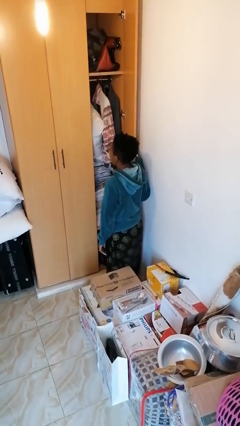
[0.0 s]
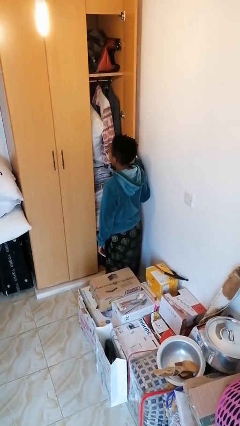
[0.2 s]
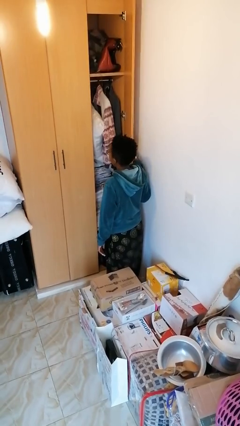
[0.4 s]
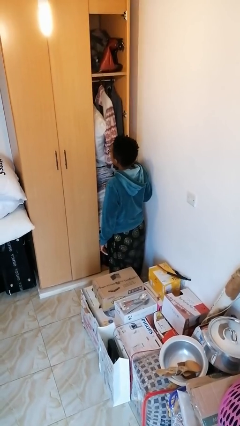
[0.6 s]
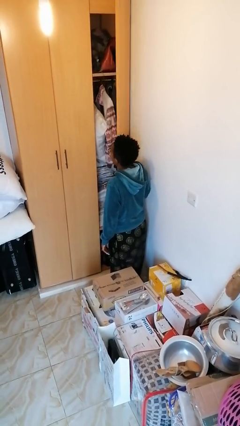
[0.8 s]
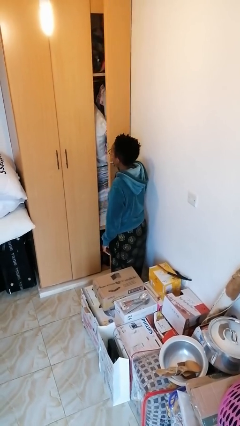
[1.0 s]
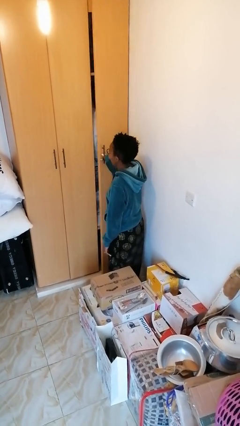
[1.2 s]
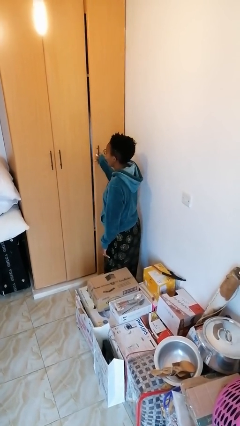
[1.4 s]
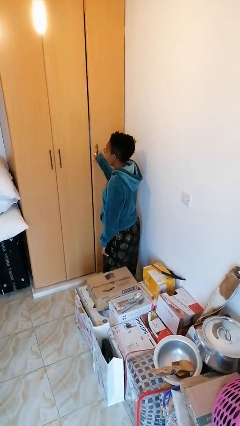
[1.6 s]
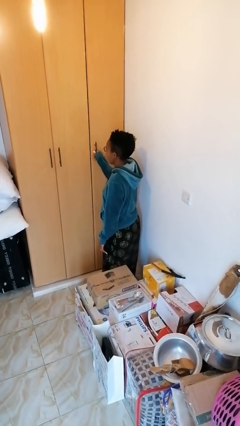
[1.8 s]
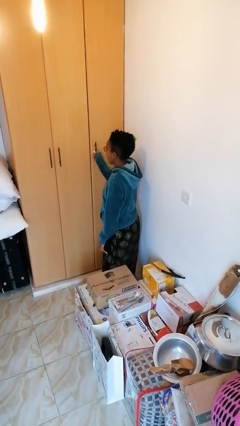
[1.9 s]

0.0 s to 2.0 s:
person closes closet door

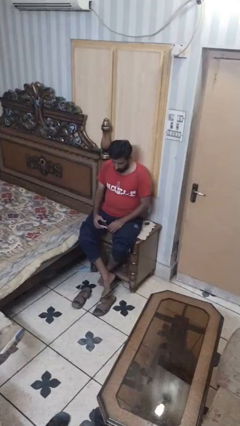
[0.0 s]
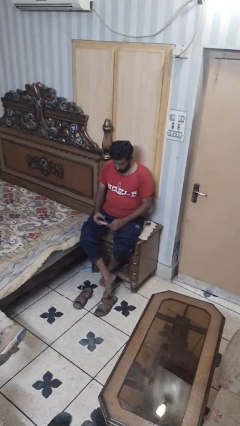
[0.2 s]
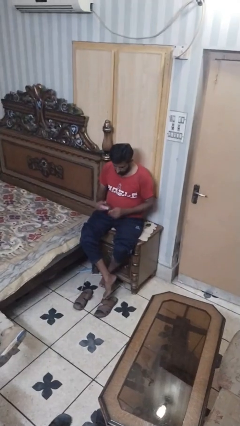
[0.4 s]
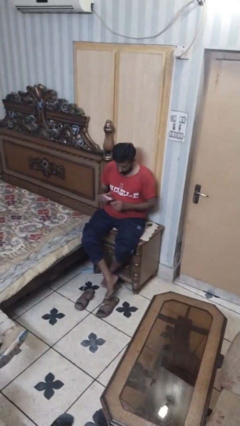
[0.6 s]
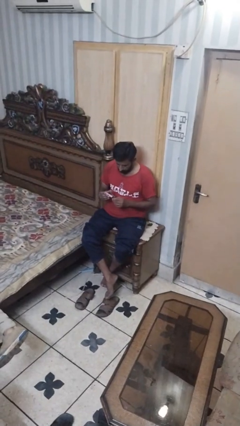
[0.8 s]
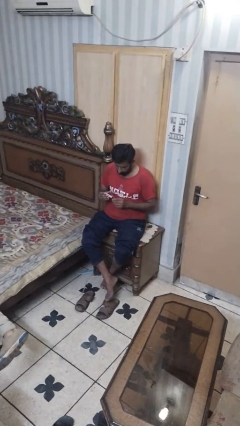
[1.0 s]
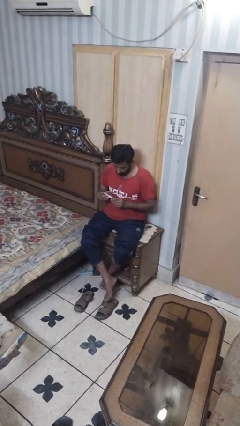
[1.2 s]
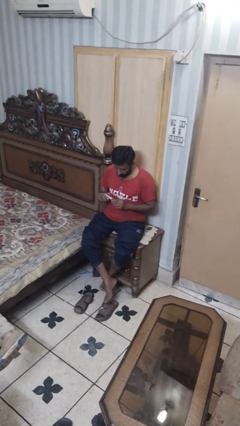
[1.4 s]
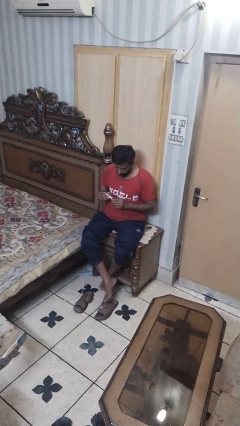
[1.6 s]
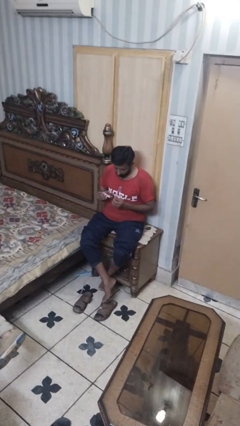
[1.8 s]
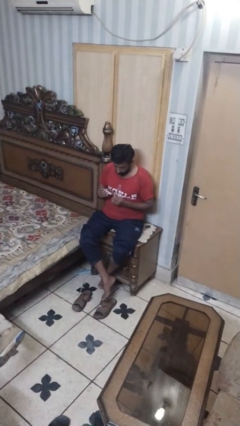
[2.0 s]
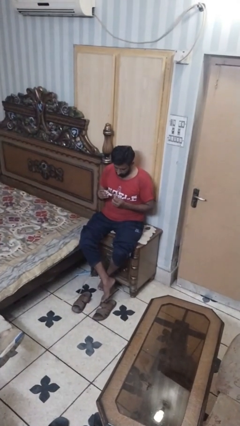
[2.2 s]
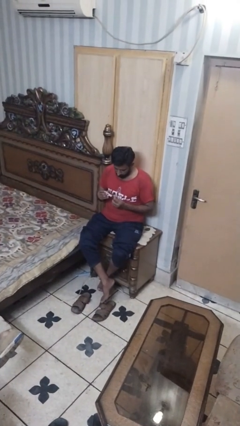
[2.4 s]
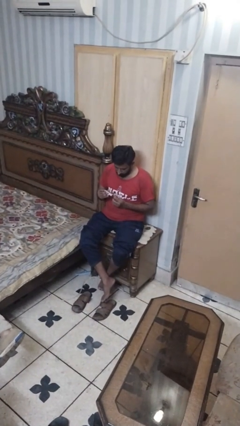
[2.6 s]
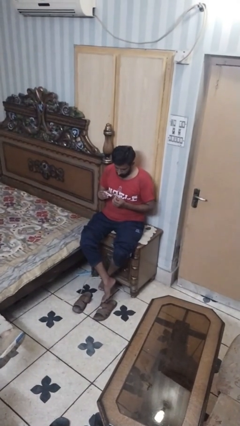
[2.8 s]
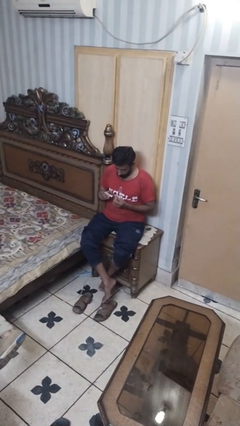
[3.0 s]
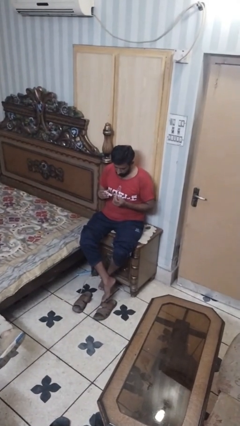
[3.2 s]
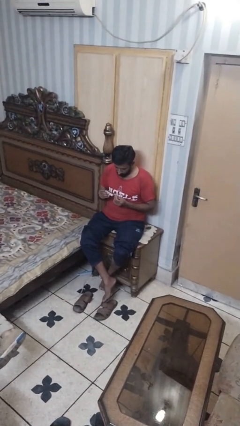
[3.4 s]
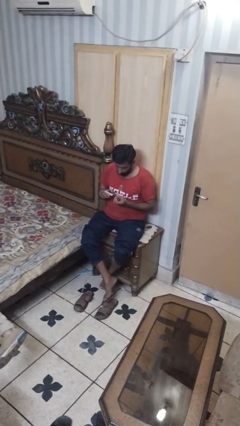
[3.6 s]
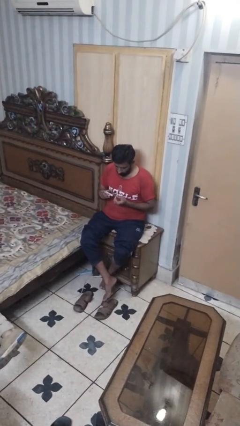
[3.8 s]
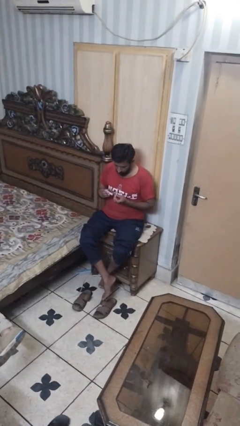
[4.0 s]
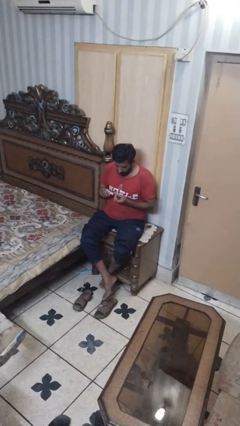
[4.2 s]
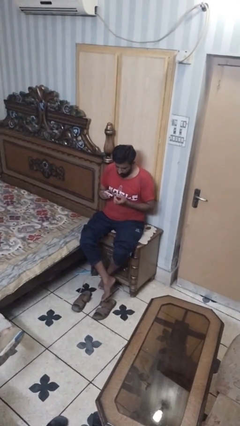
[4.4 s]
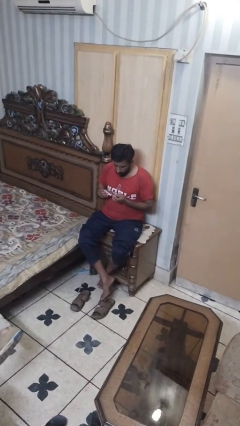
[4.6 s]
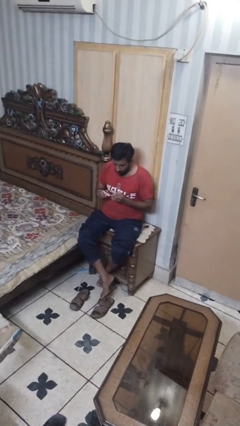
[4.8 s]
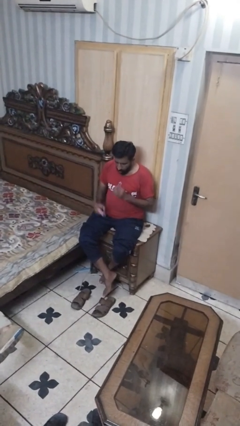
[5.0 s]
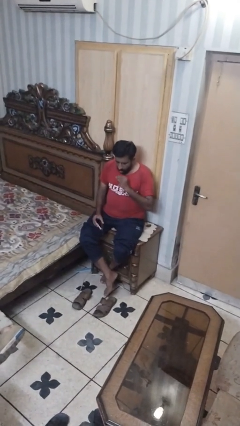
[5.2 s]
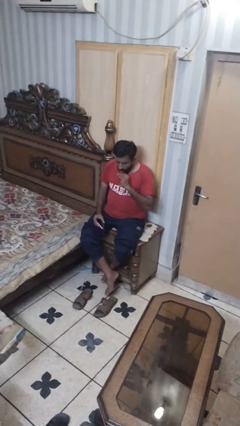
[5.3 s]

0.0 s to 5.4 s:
person clips fingernails

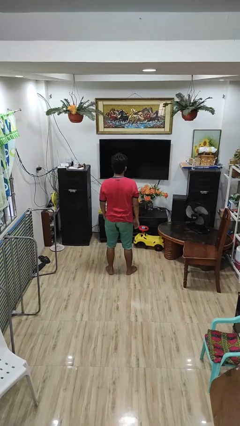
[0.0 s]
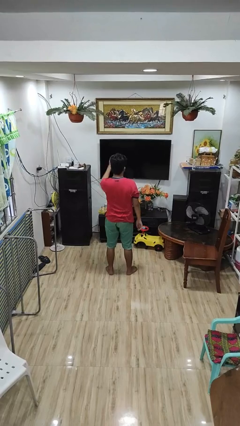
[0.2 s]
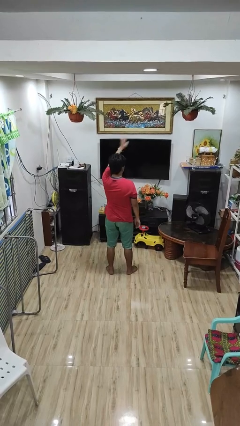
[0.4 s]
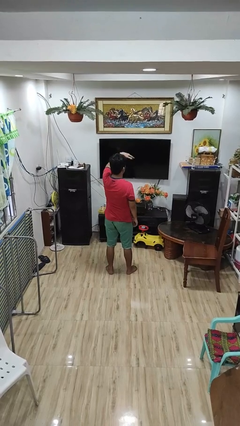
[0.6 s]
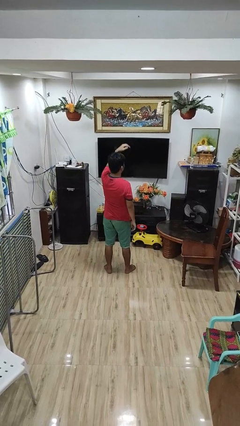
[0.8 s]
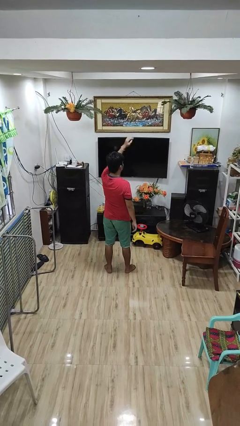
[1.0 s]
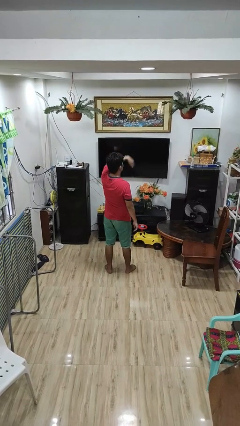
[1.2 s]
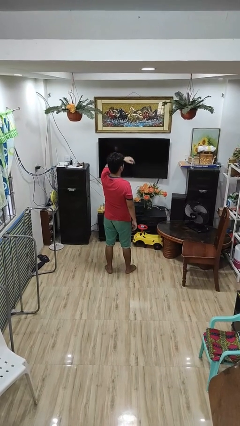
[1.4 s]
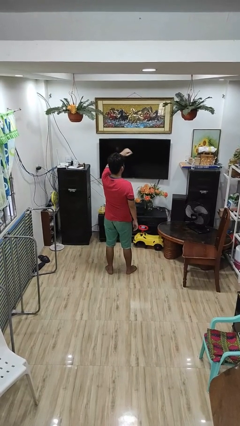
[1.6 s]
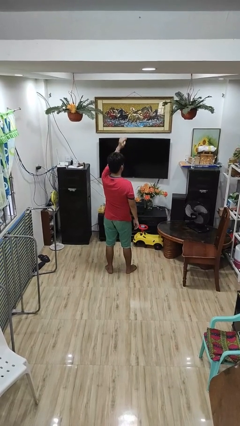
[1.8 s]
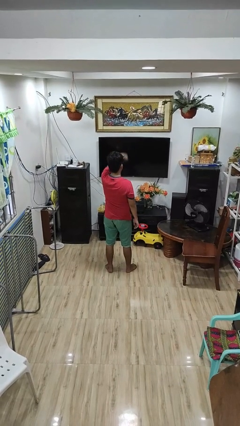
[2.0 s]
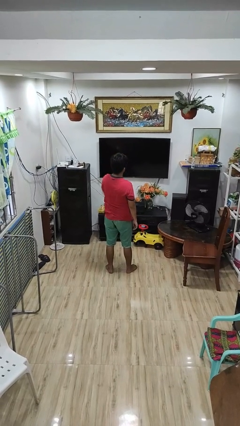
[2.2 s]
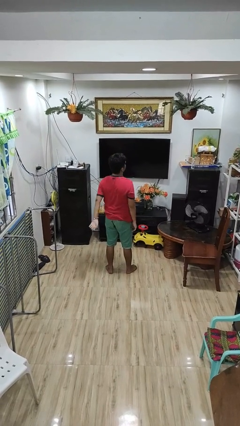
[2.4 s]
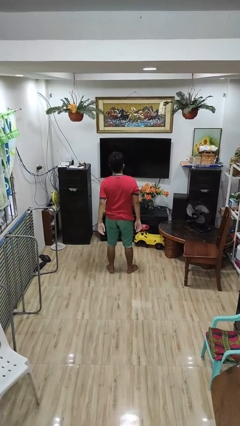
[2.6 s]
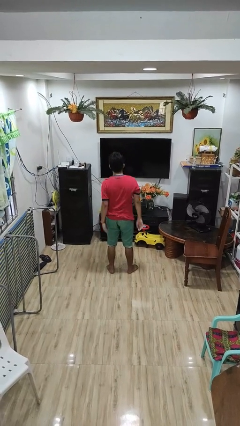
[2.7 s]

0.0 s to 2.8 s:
person gestures come here

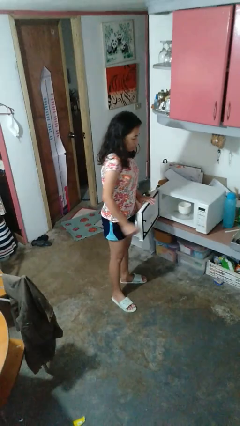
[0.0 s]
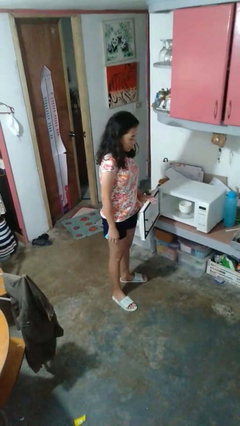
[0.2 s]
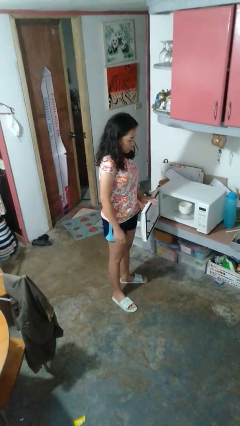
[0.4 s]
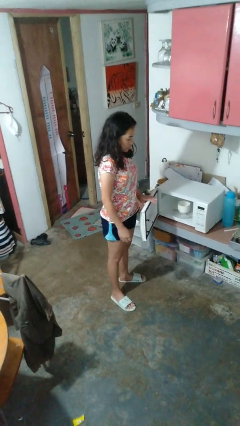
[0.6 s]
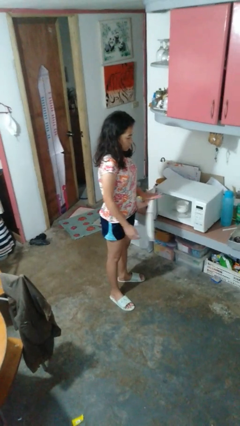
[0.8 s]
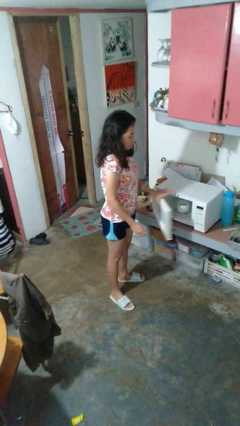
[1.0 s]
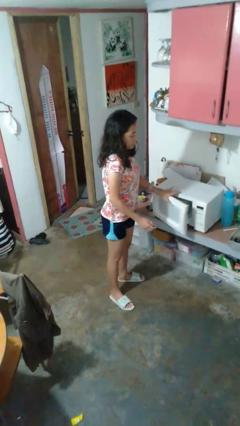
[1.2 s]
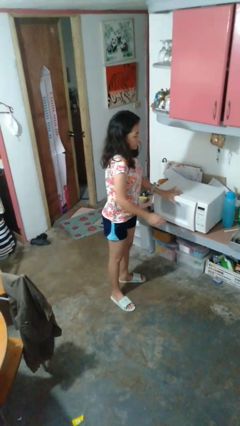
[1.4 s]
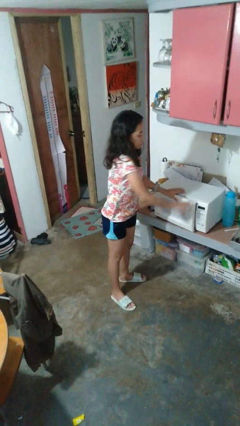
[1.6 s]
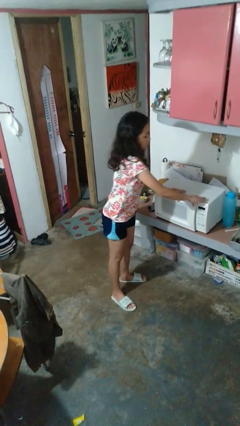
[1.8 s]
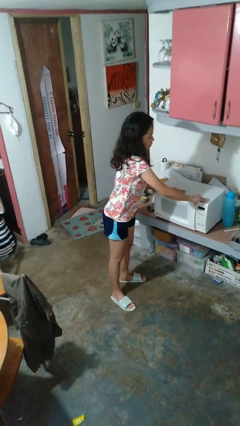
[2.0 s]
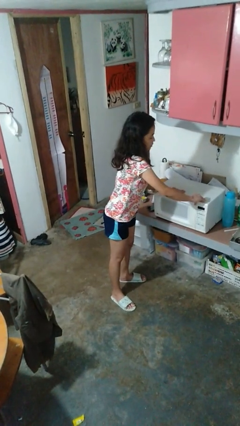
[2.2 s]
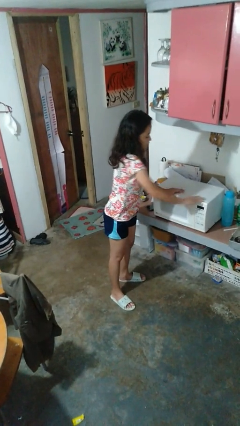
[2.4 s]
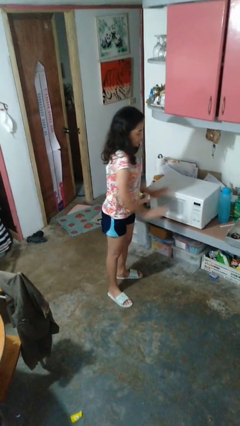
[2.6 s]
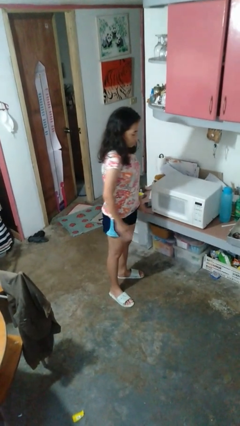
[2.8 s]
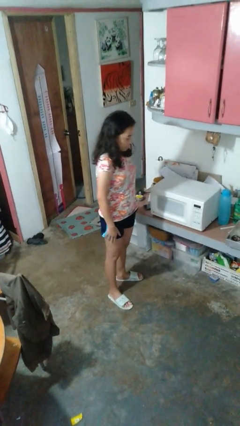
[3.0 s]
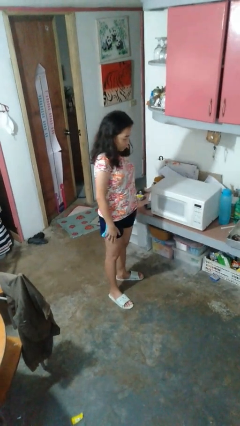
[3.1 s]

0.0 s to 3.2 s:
person closes microwave

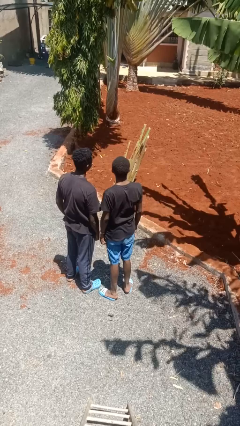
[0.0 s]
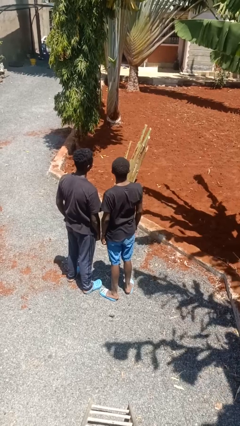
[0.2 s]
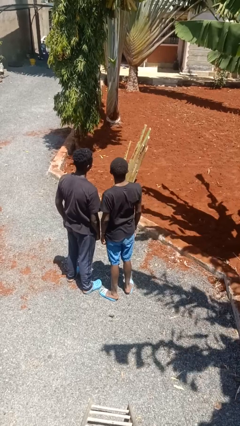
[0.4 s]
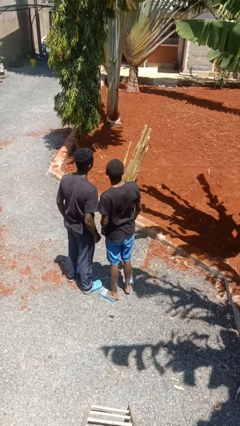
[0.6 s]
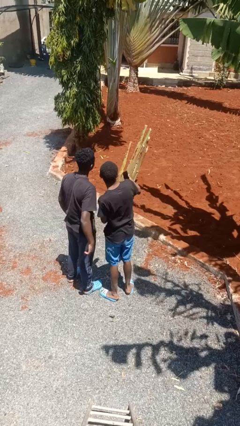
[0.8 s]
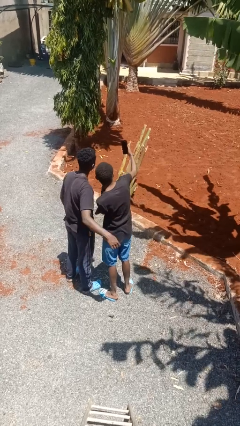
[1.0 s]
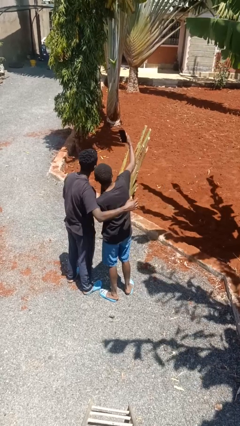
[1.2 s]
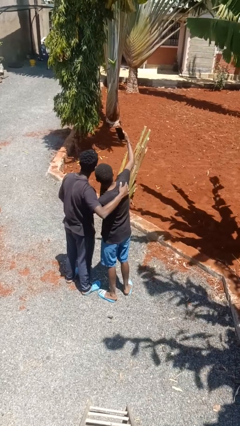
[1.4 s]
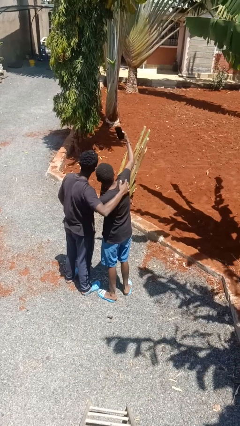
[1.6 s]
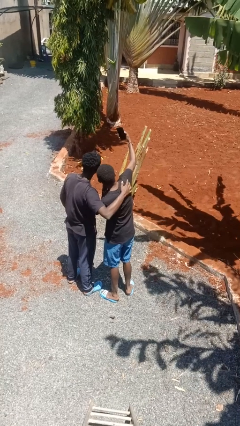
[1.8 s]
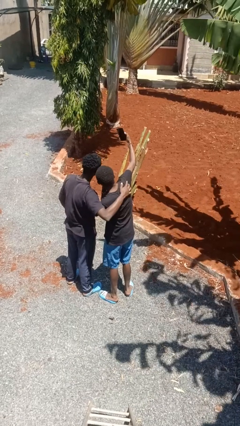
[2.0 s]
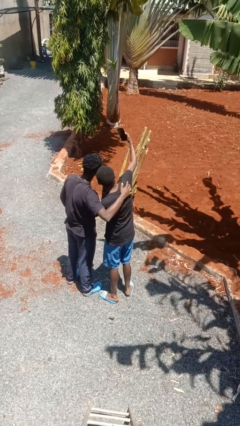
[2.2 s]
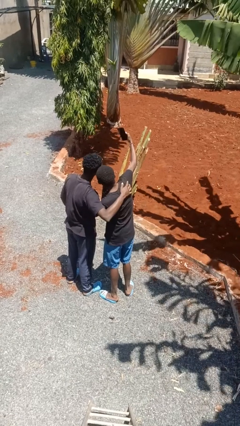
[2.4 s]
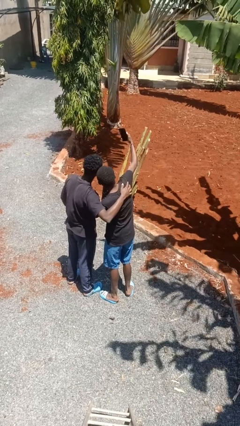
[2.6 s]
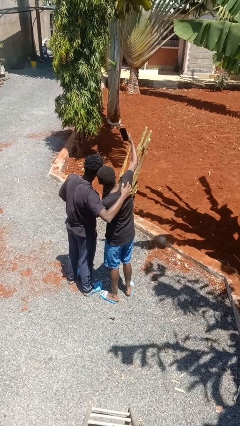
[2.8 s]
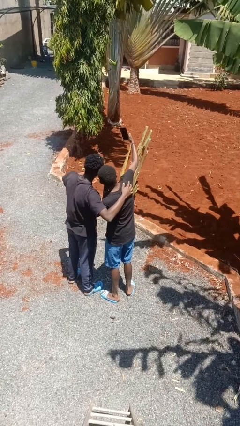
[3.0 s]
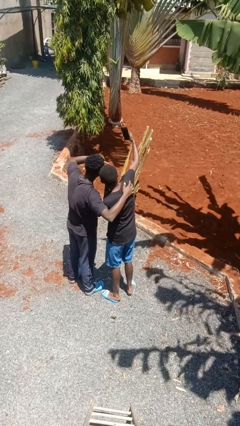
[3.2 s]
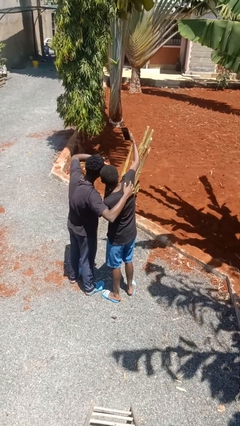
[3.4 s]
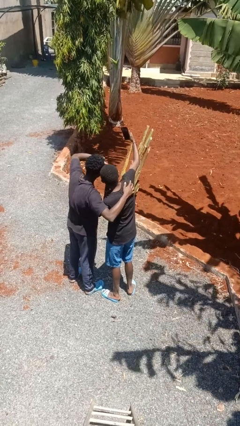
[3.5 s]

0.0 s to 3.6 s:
person takes selfie with person

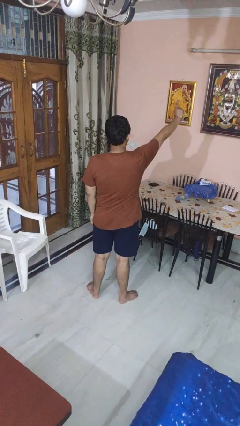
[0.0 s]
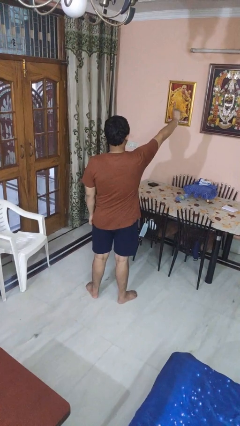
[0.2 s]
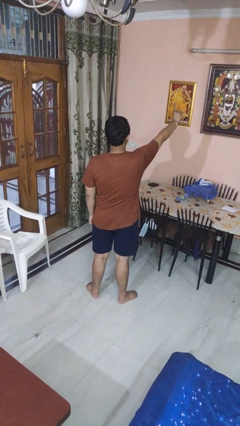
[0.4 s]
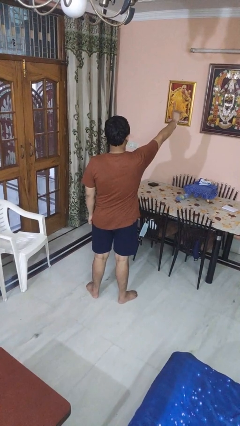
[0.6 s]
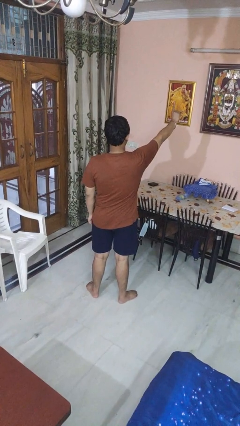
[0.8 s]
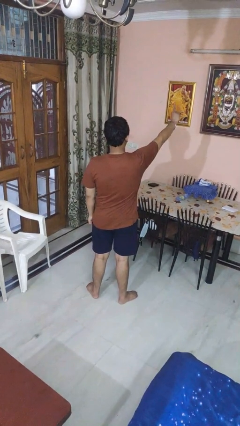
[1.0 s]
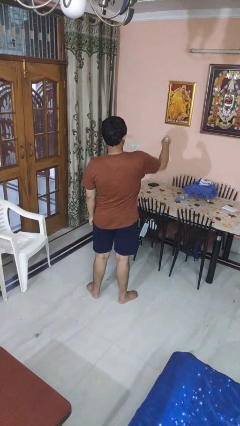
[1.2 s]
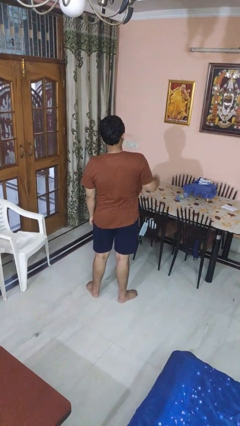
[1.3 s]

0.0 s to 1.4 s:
person gestures number one
